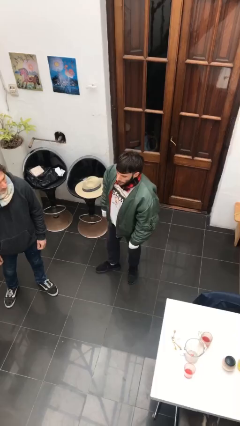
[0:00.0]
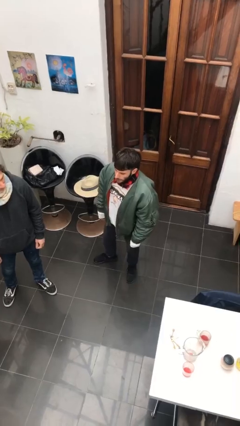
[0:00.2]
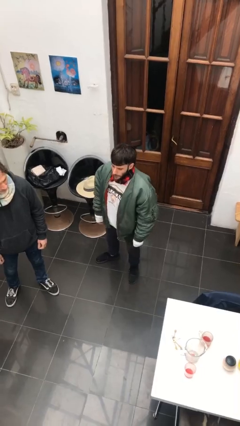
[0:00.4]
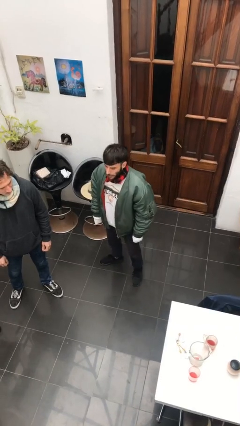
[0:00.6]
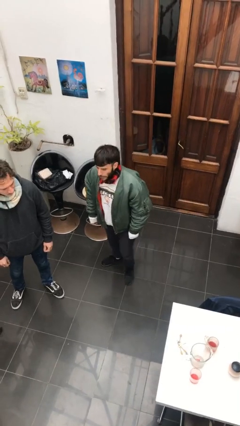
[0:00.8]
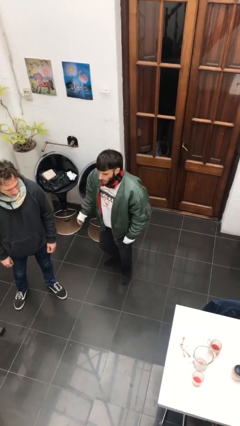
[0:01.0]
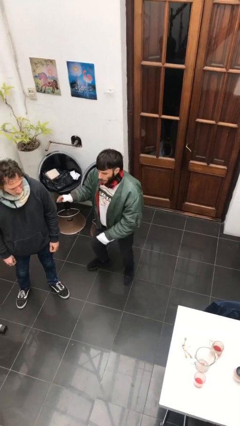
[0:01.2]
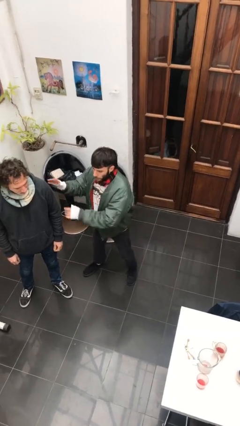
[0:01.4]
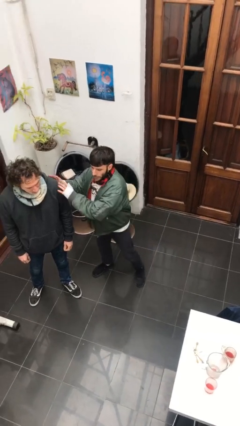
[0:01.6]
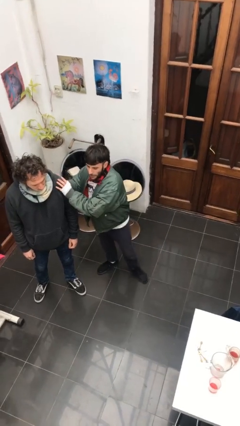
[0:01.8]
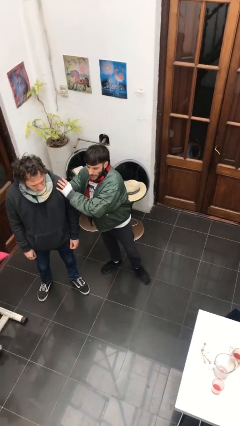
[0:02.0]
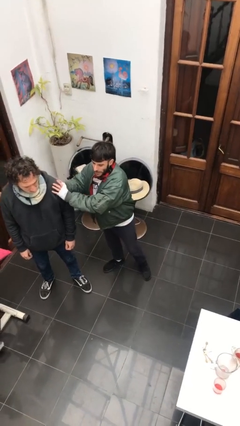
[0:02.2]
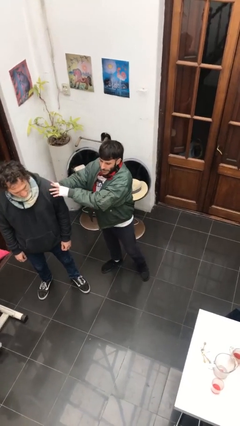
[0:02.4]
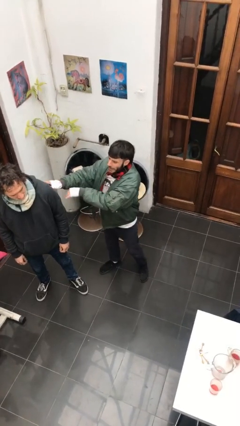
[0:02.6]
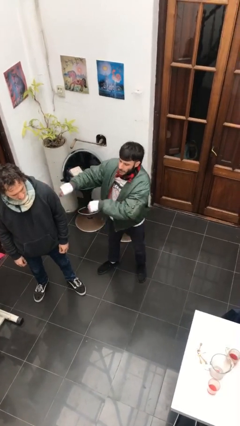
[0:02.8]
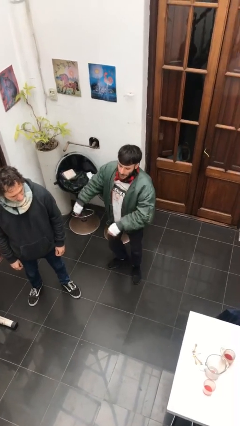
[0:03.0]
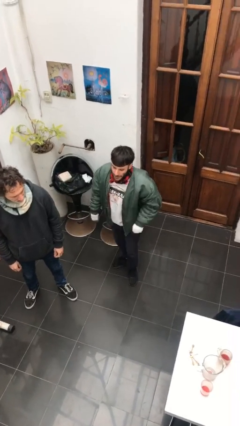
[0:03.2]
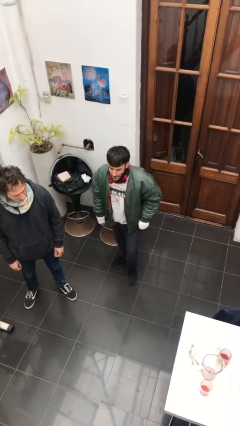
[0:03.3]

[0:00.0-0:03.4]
person shoves person

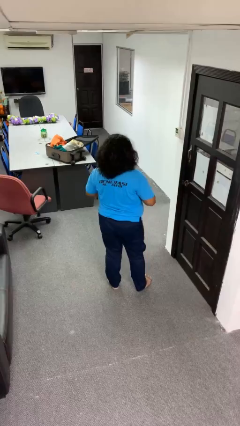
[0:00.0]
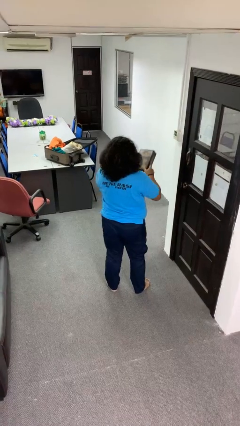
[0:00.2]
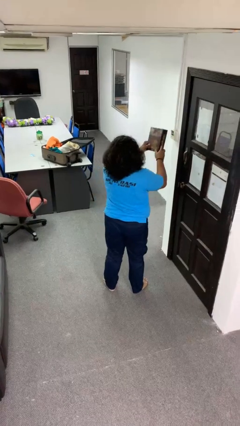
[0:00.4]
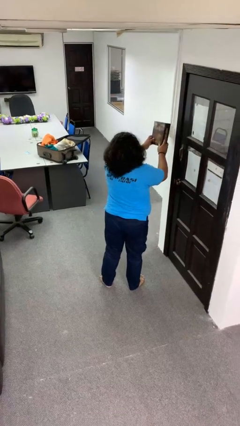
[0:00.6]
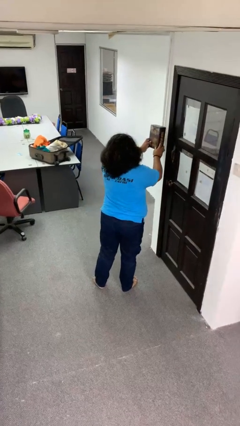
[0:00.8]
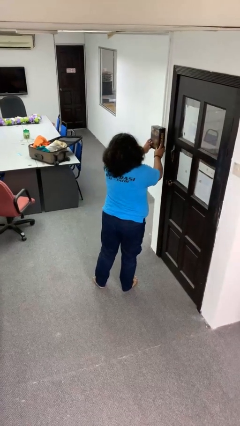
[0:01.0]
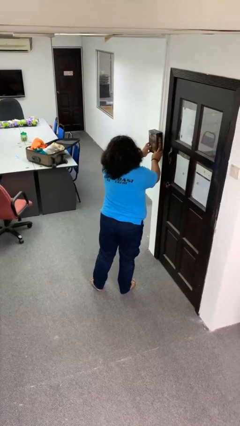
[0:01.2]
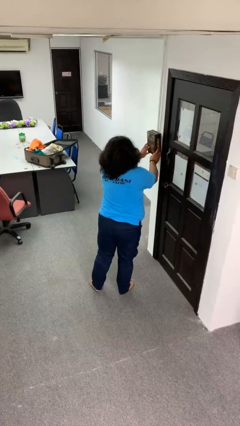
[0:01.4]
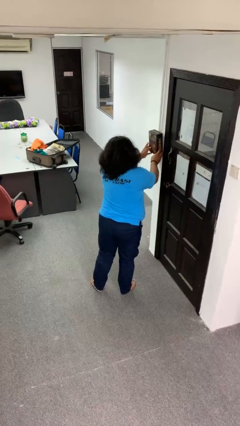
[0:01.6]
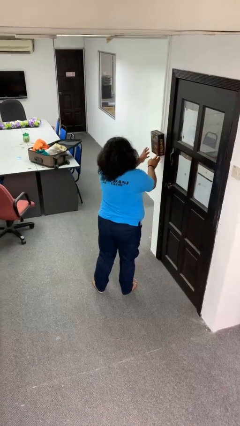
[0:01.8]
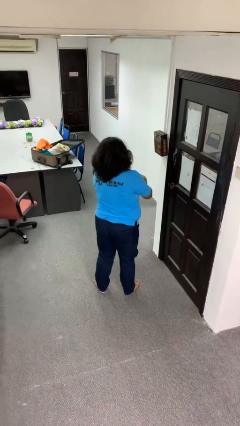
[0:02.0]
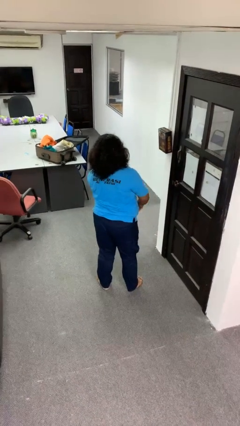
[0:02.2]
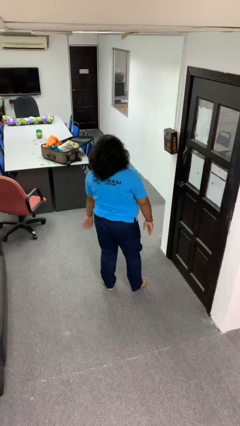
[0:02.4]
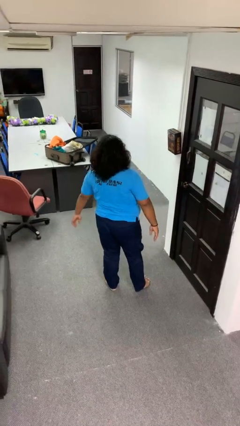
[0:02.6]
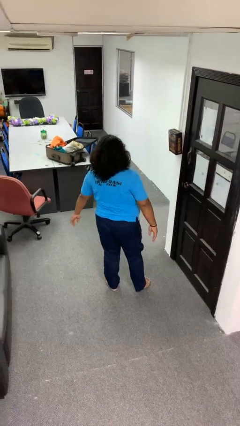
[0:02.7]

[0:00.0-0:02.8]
person puts up picture frame

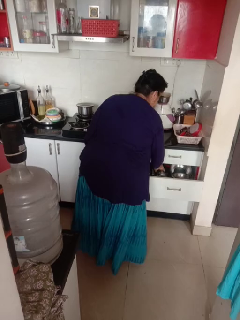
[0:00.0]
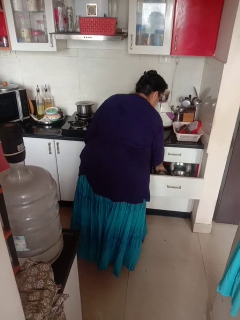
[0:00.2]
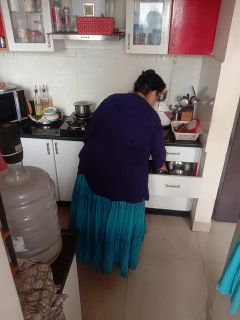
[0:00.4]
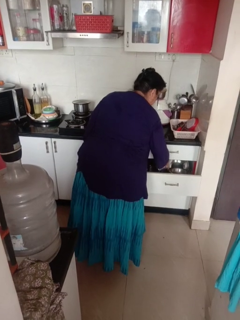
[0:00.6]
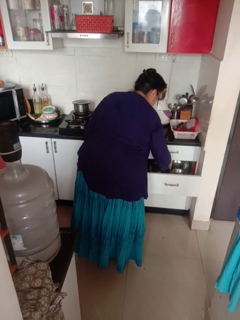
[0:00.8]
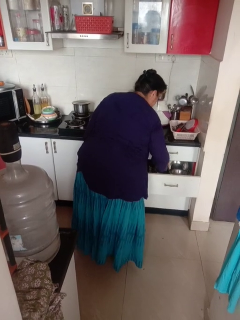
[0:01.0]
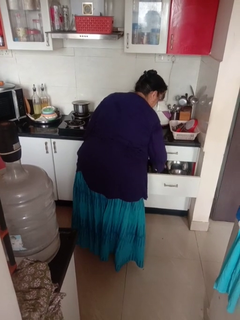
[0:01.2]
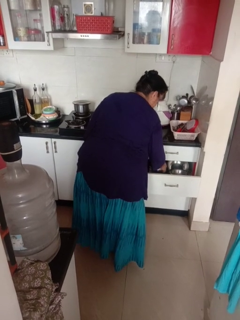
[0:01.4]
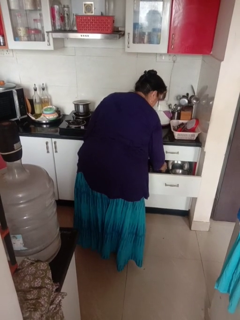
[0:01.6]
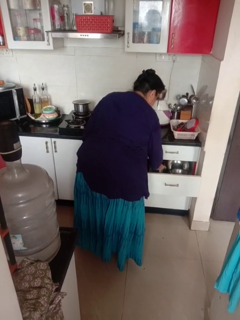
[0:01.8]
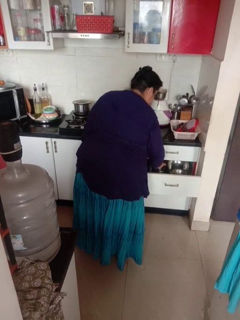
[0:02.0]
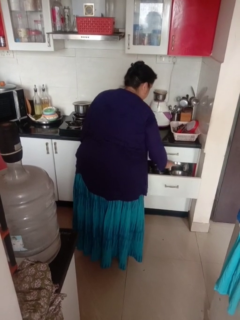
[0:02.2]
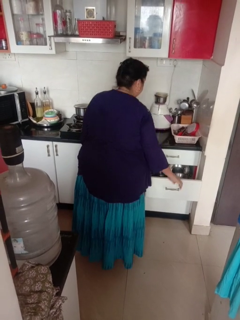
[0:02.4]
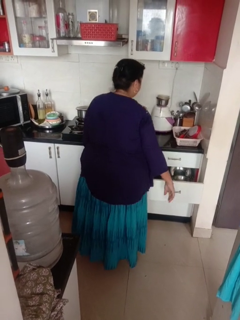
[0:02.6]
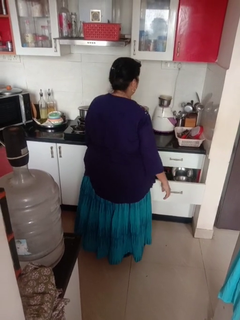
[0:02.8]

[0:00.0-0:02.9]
person searches in kitchen drawer

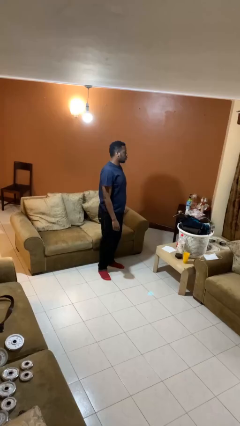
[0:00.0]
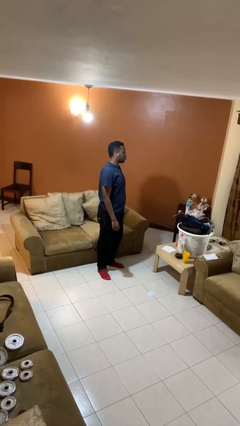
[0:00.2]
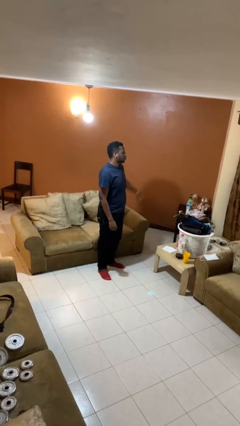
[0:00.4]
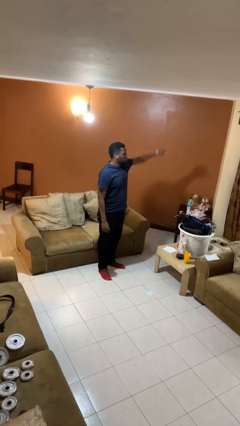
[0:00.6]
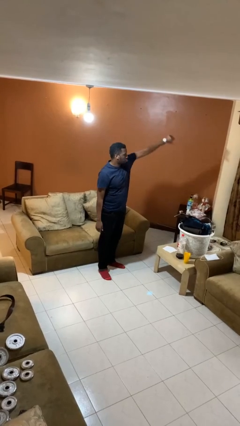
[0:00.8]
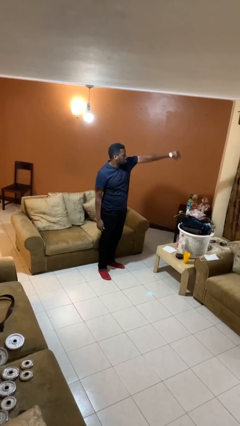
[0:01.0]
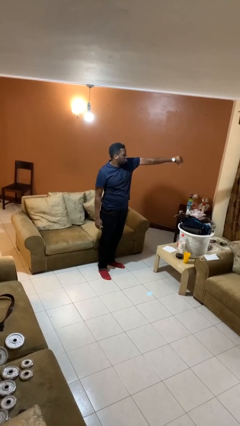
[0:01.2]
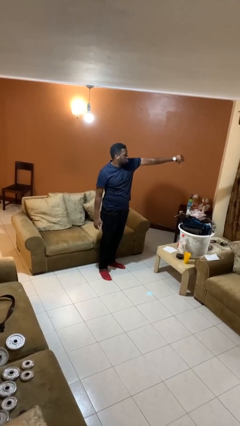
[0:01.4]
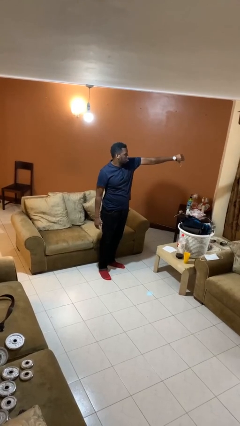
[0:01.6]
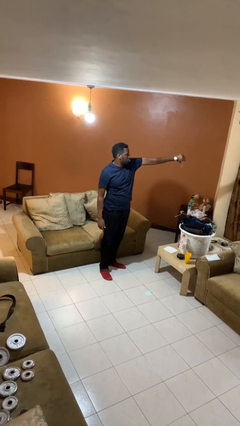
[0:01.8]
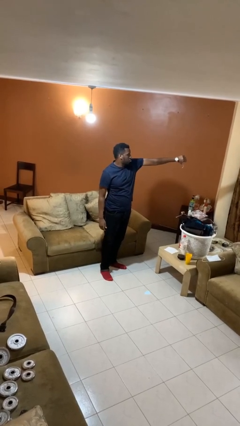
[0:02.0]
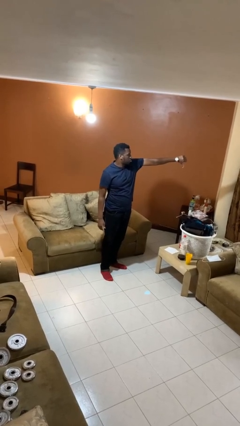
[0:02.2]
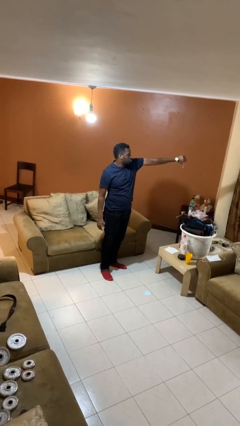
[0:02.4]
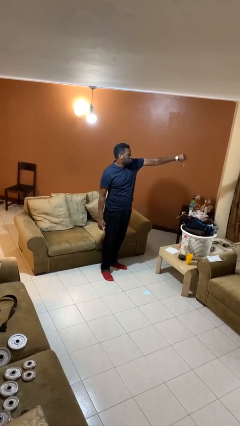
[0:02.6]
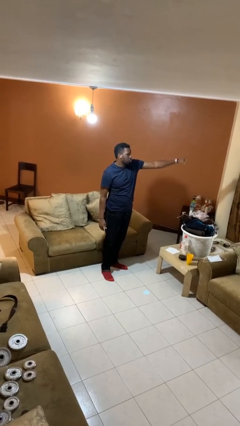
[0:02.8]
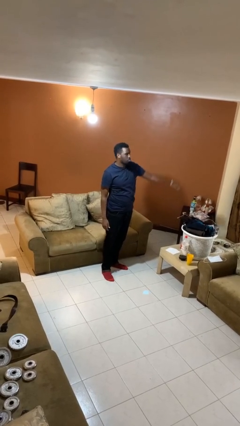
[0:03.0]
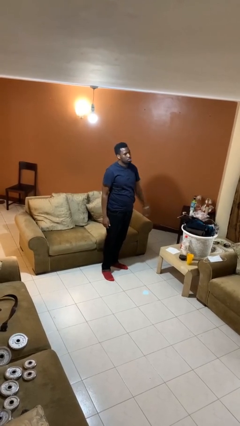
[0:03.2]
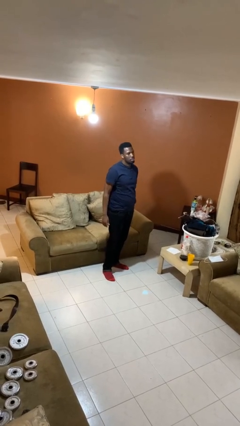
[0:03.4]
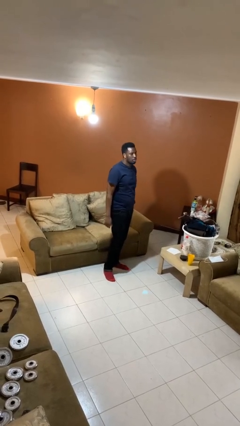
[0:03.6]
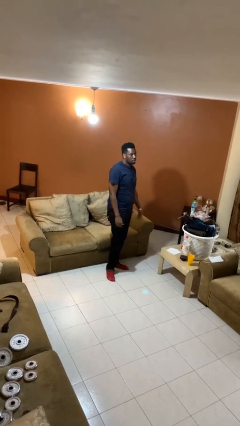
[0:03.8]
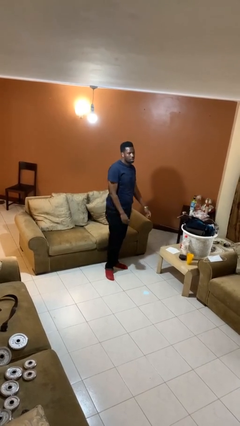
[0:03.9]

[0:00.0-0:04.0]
person gestures thumbs down

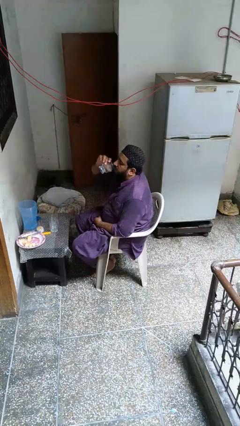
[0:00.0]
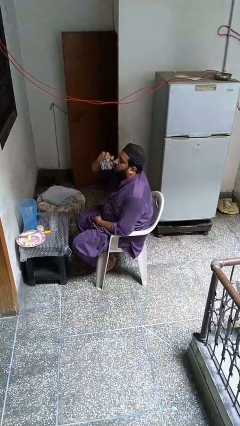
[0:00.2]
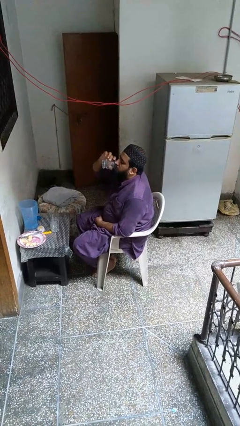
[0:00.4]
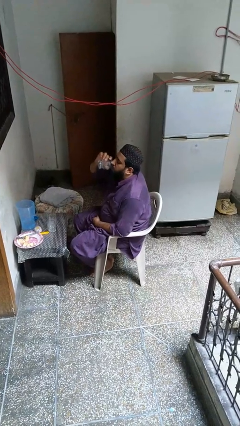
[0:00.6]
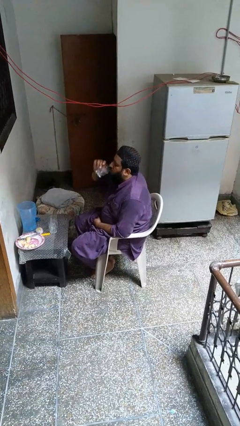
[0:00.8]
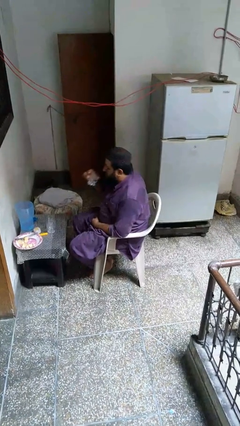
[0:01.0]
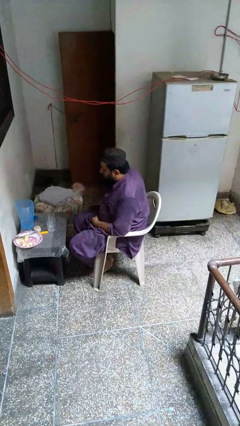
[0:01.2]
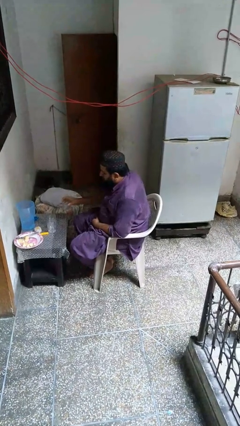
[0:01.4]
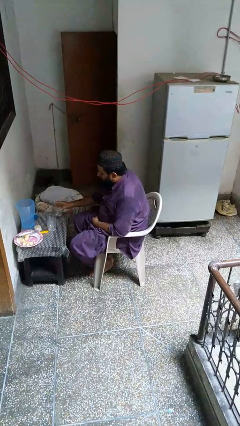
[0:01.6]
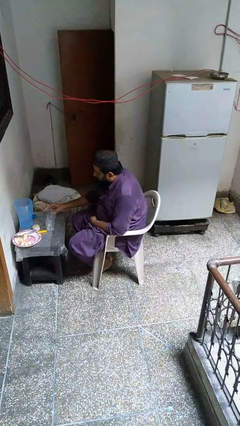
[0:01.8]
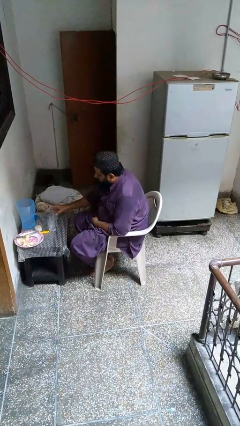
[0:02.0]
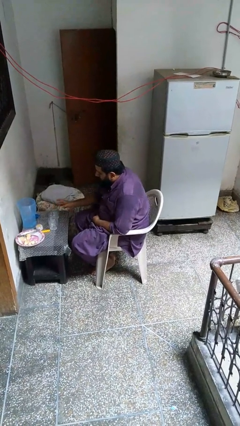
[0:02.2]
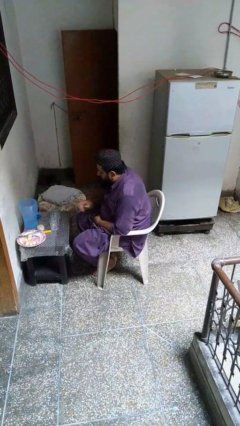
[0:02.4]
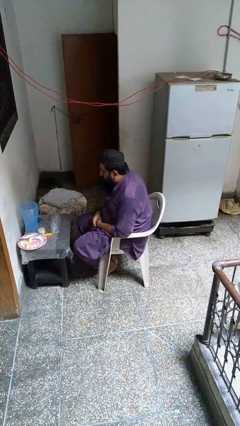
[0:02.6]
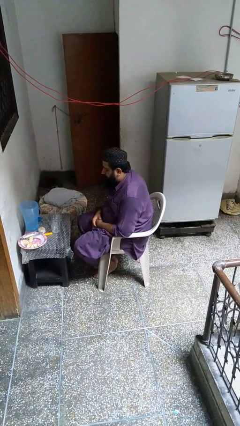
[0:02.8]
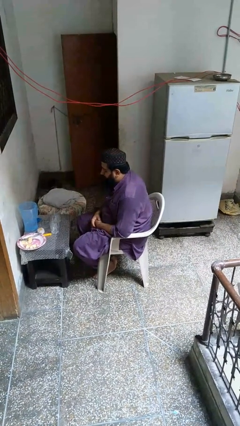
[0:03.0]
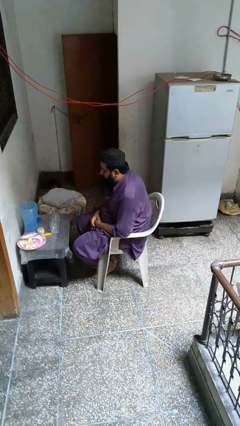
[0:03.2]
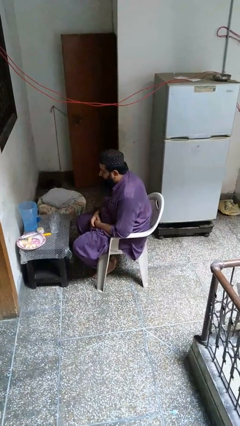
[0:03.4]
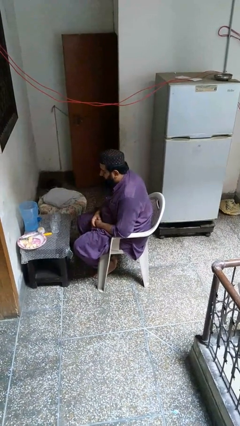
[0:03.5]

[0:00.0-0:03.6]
person puts down object on table

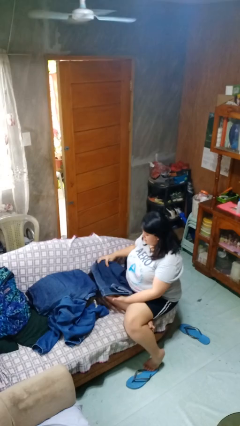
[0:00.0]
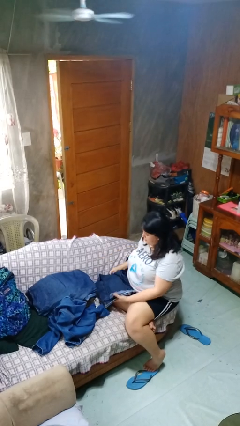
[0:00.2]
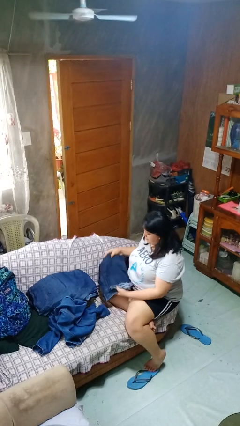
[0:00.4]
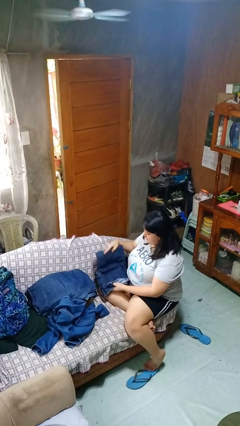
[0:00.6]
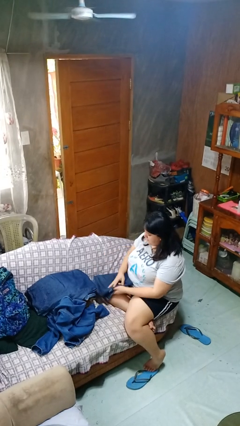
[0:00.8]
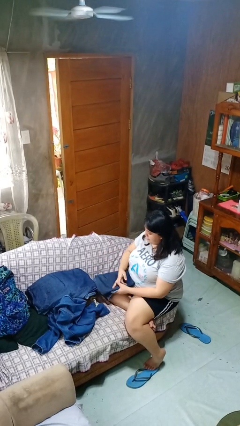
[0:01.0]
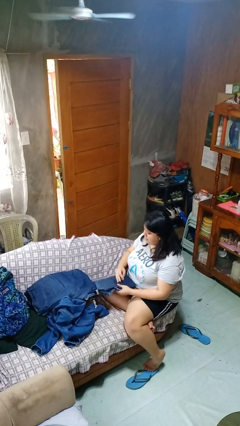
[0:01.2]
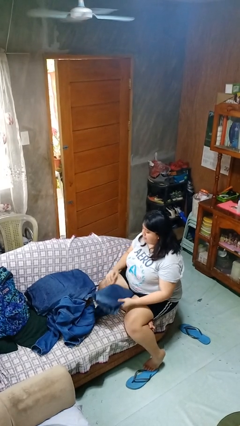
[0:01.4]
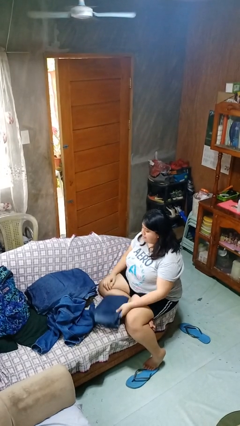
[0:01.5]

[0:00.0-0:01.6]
person folds pants
